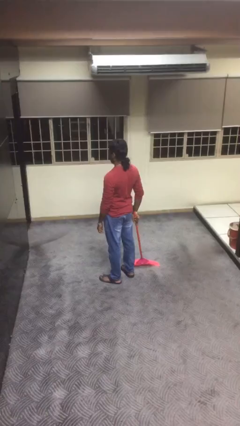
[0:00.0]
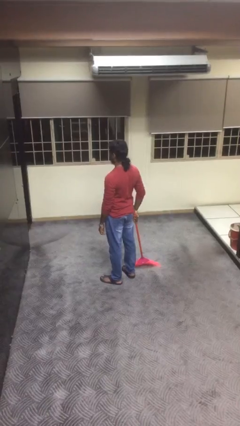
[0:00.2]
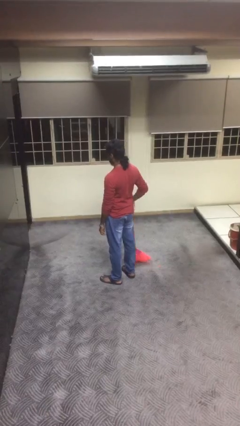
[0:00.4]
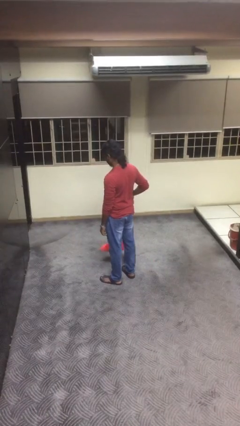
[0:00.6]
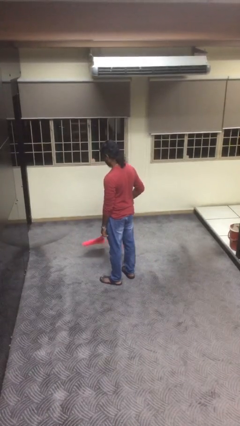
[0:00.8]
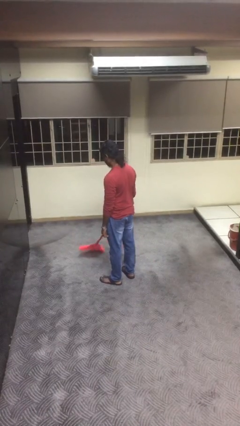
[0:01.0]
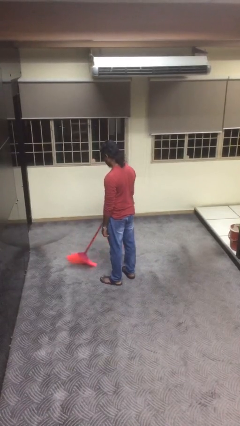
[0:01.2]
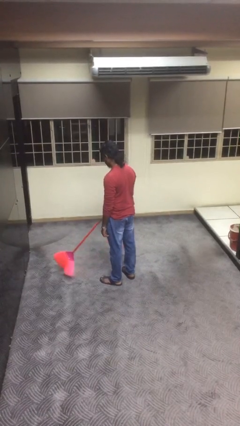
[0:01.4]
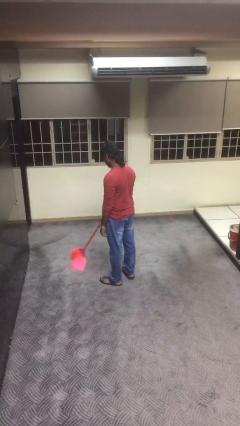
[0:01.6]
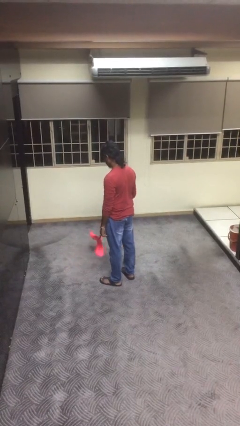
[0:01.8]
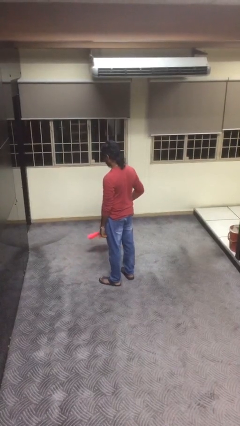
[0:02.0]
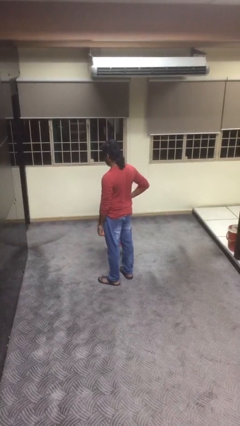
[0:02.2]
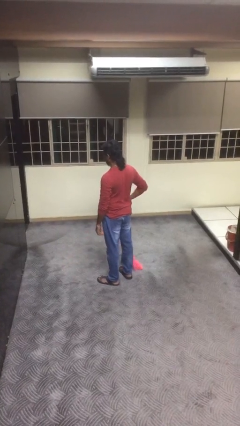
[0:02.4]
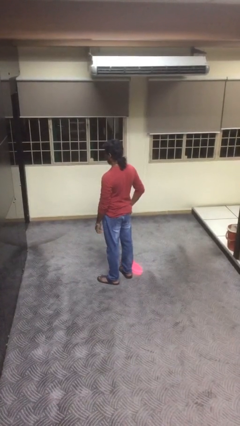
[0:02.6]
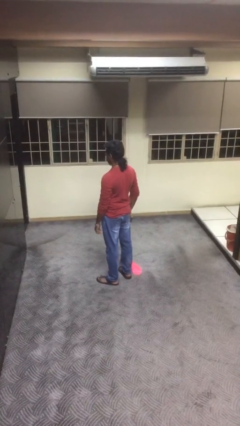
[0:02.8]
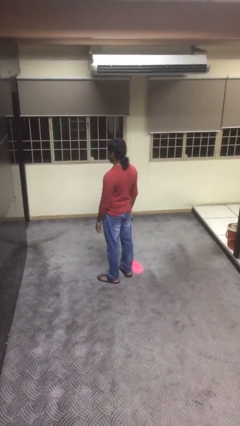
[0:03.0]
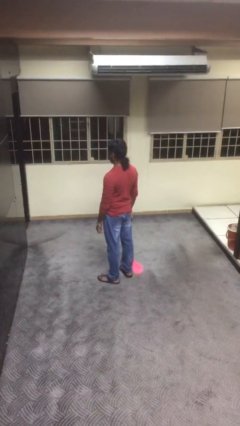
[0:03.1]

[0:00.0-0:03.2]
person sweeps floor

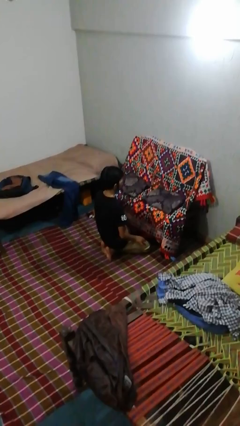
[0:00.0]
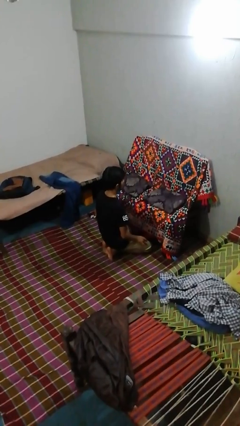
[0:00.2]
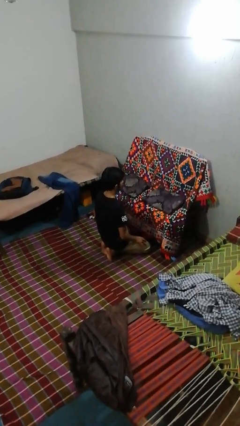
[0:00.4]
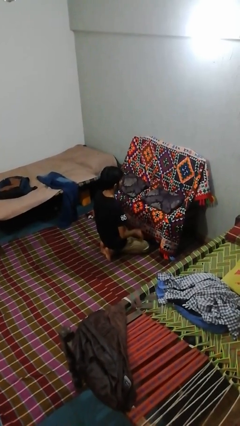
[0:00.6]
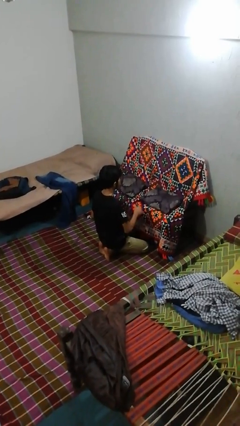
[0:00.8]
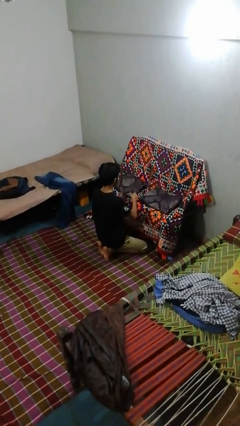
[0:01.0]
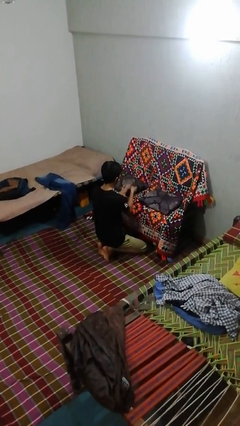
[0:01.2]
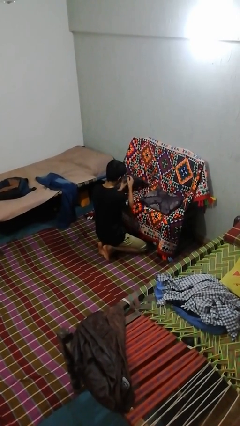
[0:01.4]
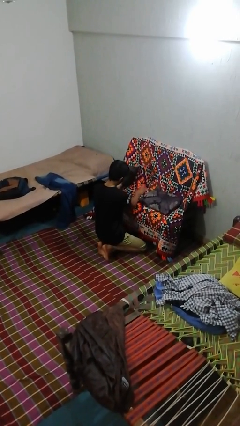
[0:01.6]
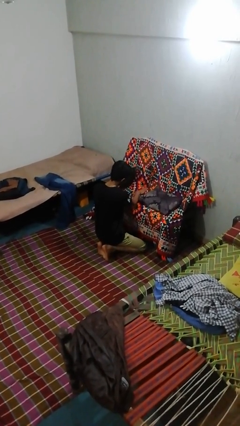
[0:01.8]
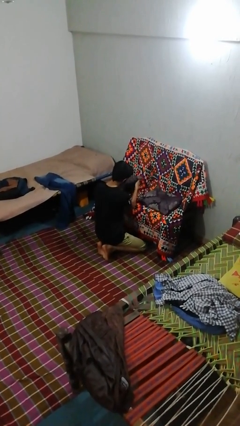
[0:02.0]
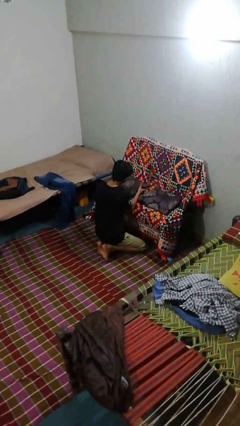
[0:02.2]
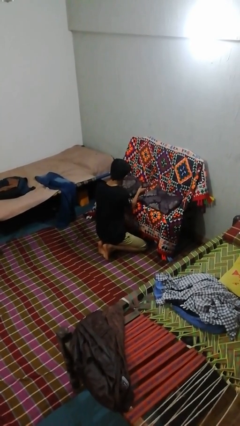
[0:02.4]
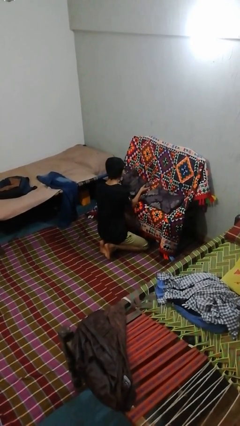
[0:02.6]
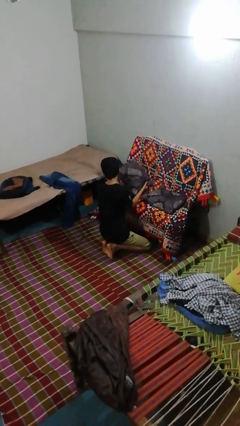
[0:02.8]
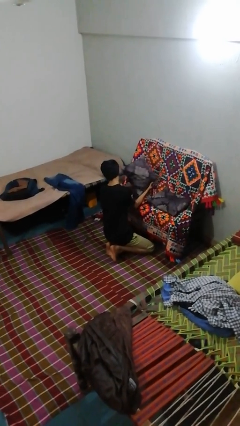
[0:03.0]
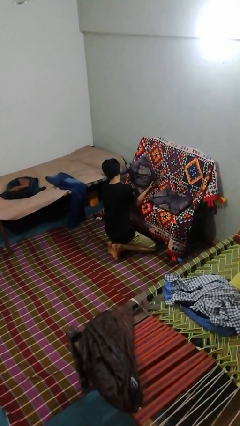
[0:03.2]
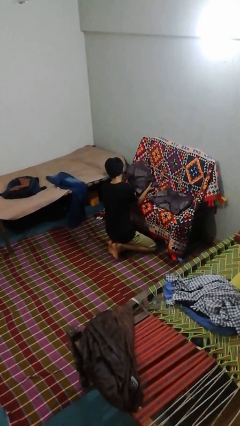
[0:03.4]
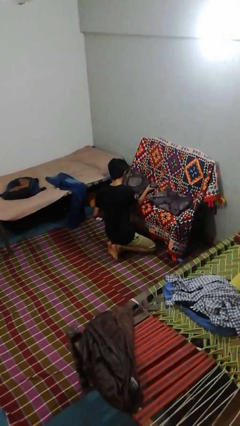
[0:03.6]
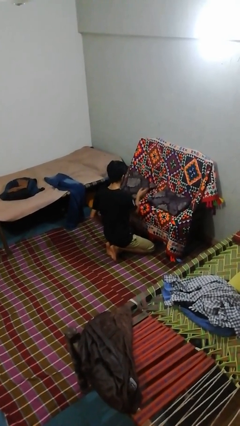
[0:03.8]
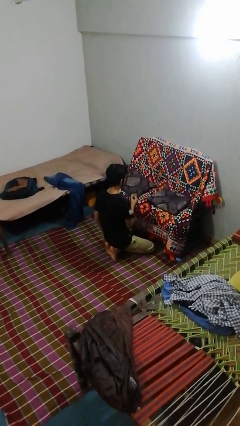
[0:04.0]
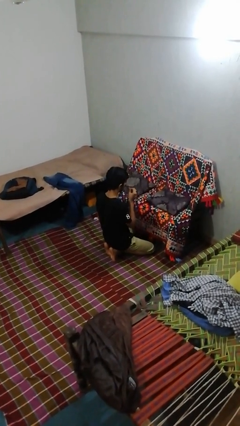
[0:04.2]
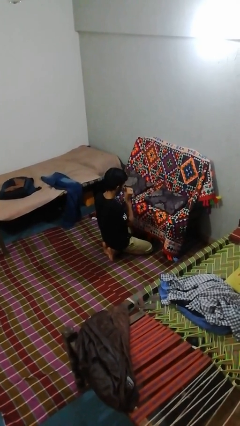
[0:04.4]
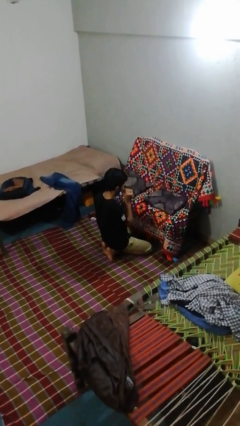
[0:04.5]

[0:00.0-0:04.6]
person searches in couch

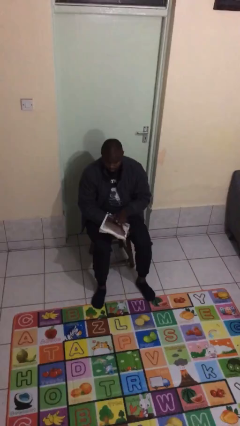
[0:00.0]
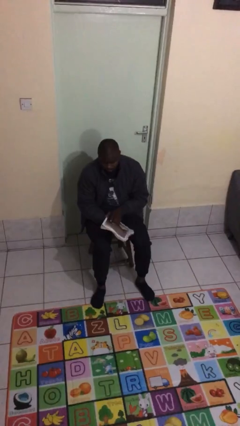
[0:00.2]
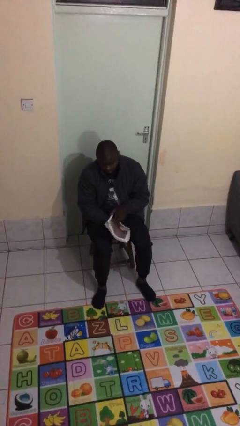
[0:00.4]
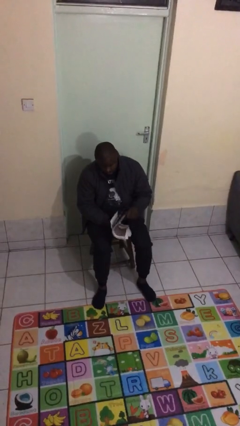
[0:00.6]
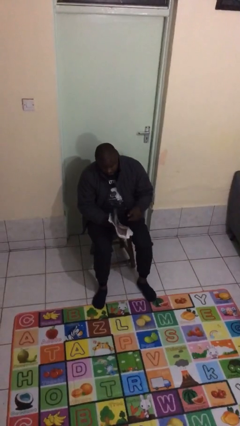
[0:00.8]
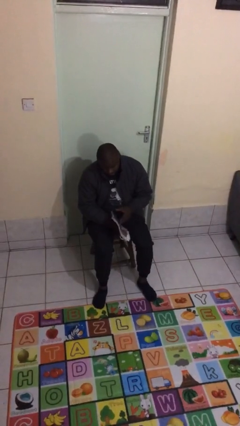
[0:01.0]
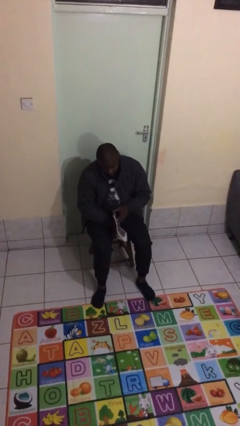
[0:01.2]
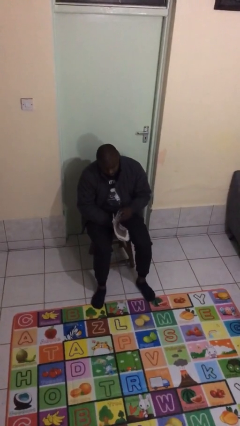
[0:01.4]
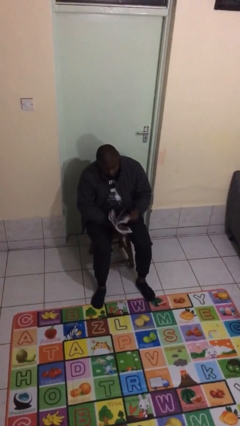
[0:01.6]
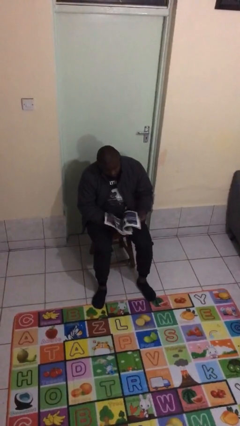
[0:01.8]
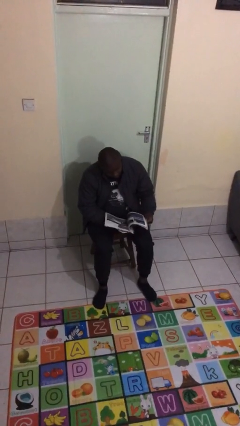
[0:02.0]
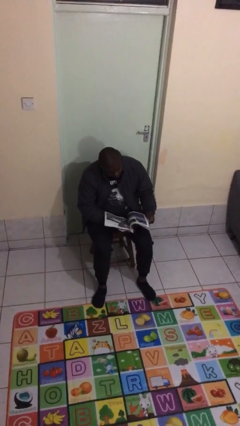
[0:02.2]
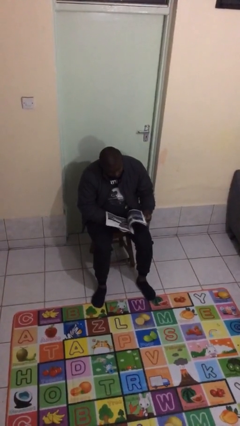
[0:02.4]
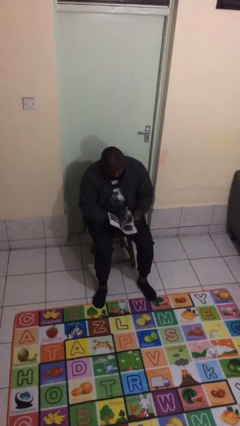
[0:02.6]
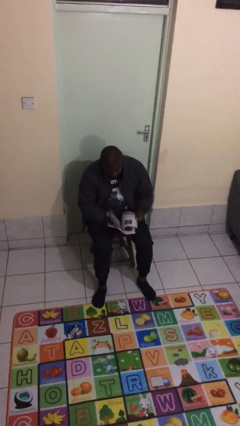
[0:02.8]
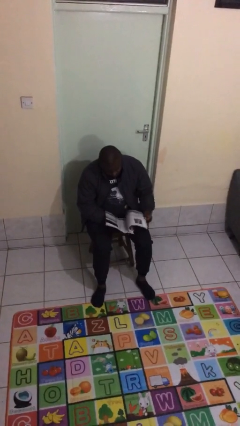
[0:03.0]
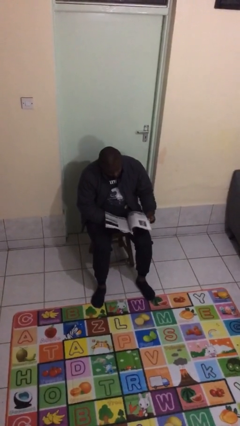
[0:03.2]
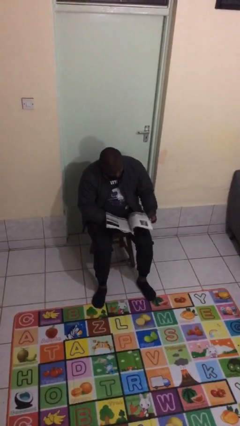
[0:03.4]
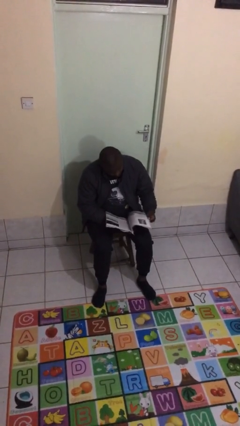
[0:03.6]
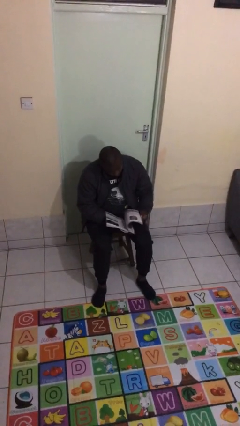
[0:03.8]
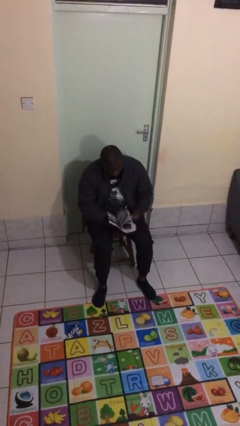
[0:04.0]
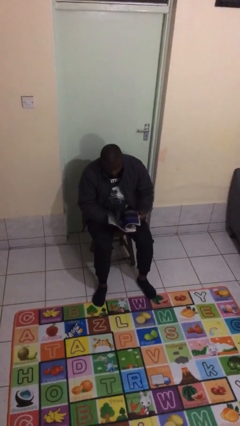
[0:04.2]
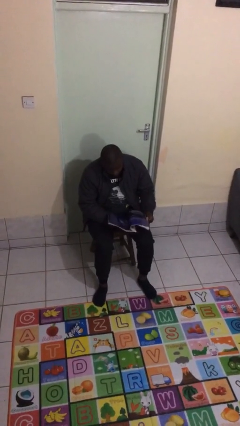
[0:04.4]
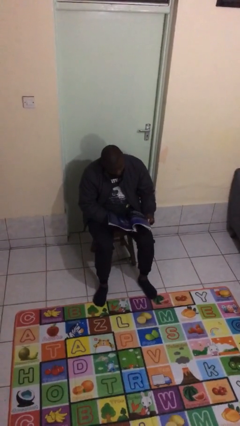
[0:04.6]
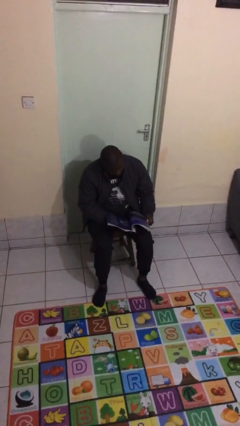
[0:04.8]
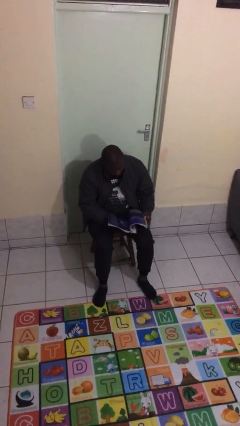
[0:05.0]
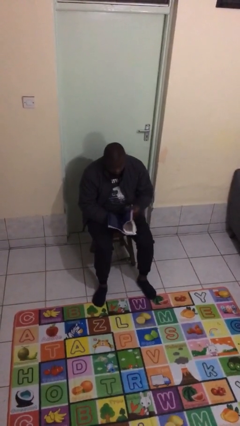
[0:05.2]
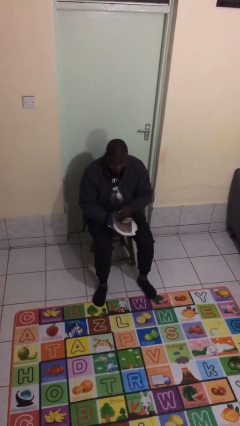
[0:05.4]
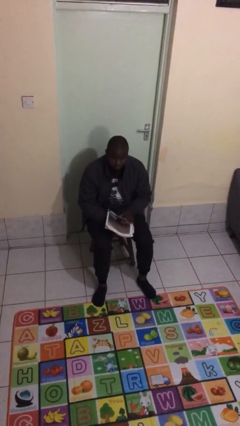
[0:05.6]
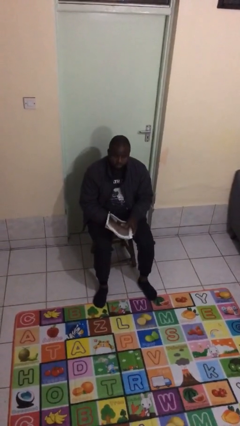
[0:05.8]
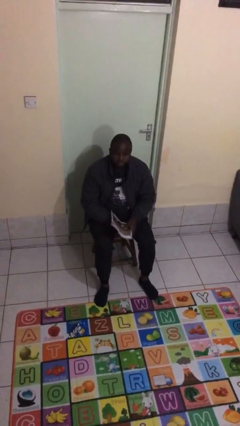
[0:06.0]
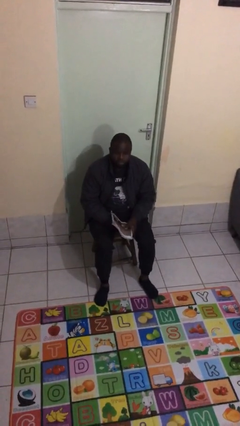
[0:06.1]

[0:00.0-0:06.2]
person reads magazine

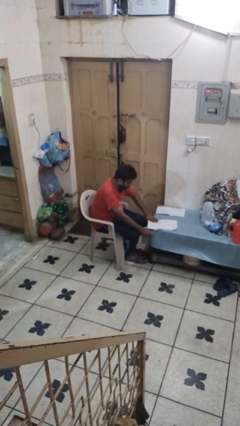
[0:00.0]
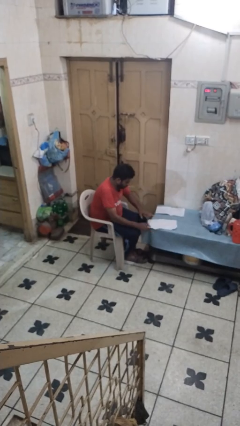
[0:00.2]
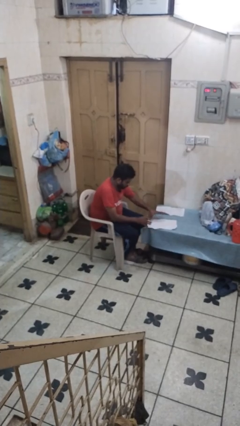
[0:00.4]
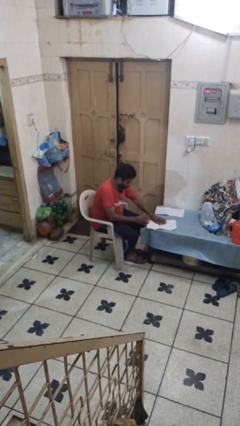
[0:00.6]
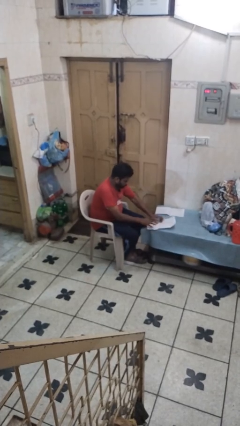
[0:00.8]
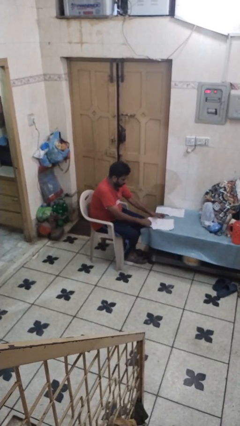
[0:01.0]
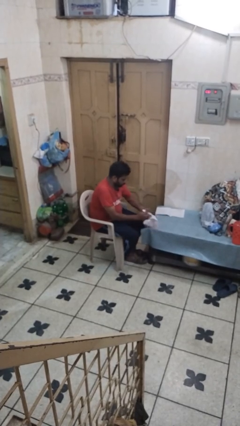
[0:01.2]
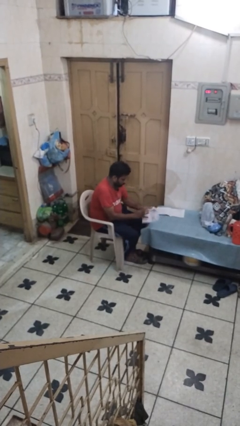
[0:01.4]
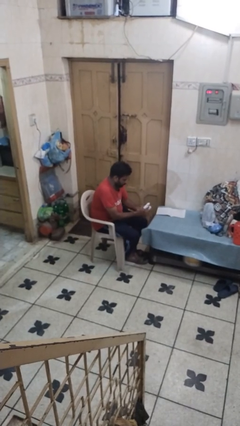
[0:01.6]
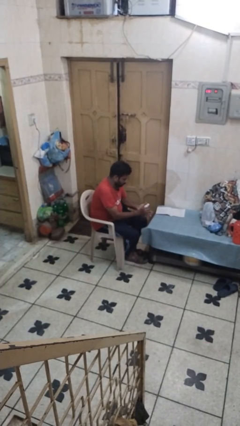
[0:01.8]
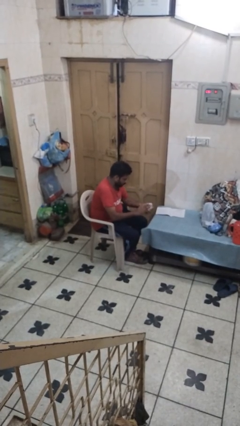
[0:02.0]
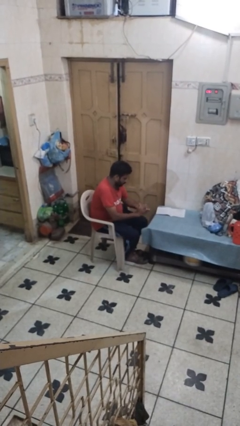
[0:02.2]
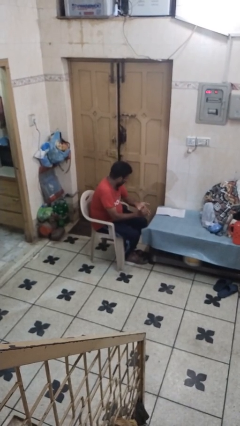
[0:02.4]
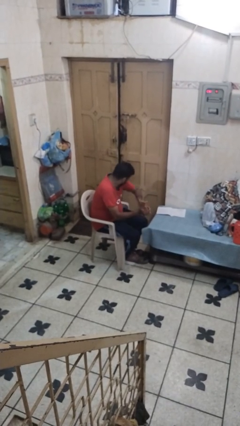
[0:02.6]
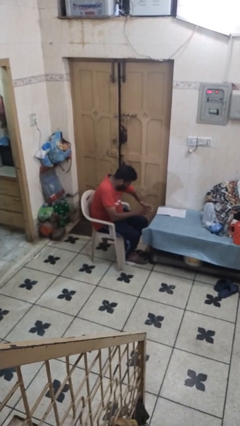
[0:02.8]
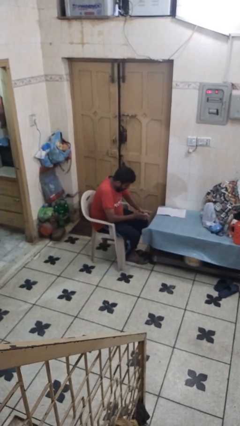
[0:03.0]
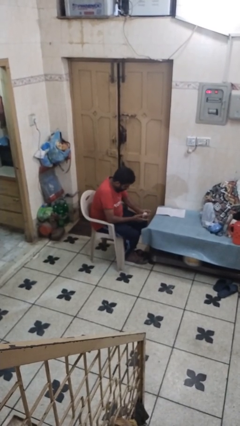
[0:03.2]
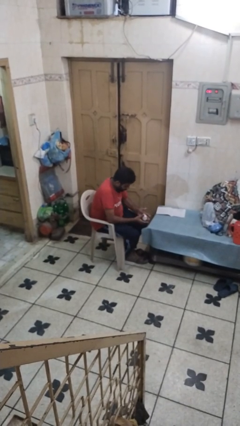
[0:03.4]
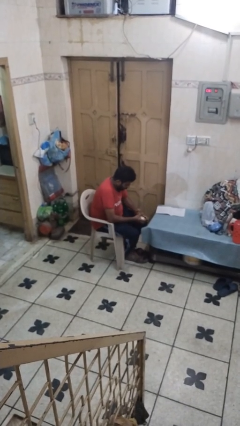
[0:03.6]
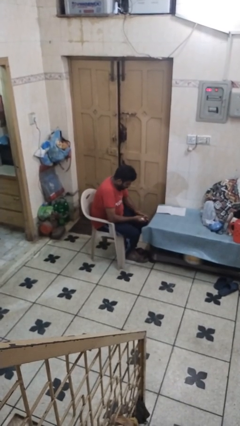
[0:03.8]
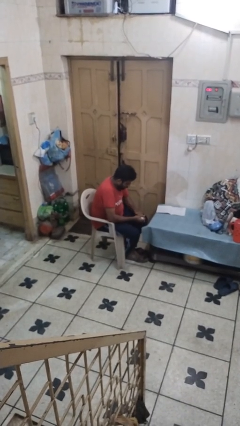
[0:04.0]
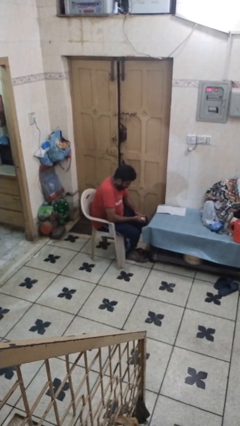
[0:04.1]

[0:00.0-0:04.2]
person crumples paper
